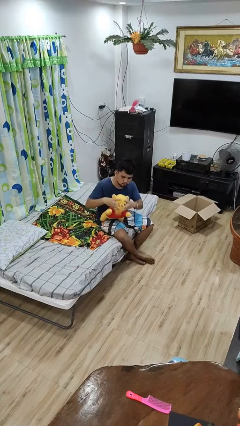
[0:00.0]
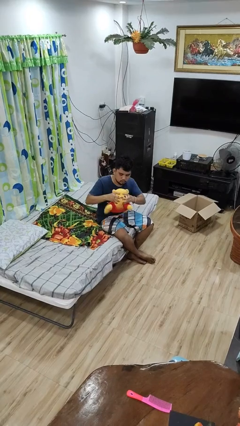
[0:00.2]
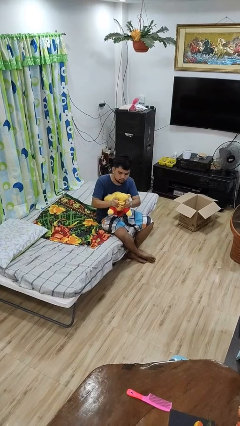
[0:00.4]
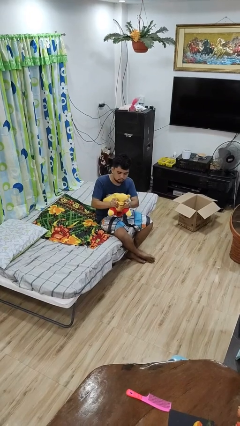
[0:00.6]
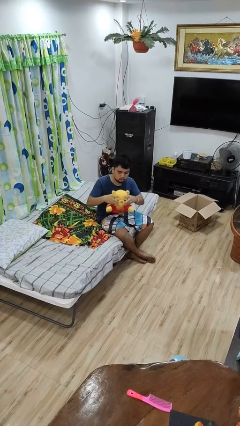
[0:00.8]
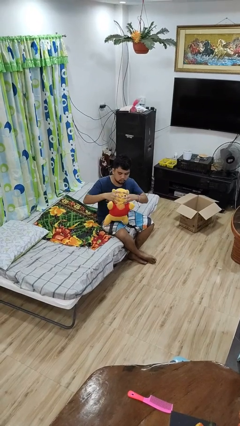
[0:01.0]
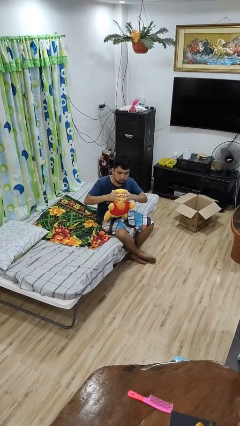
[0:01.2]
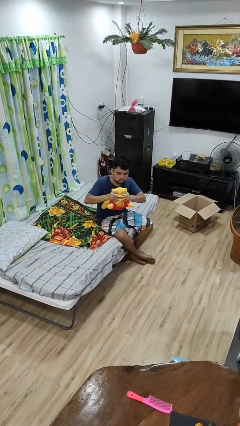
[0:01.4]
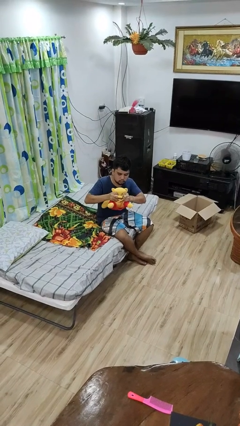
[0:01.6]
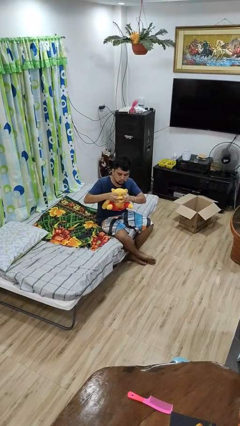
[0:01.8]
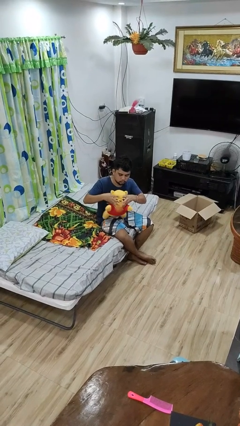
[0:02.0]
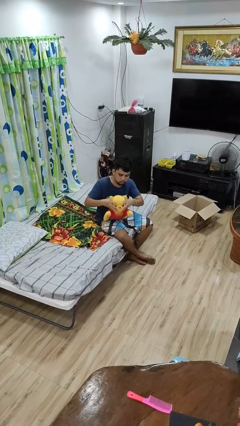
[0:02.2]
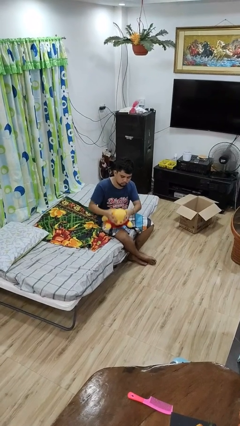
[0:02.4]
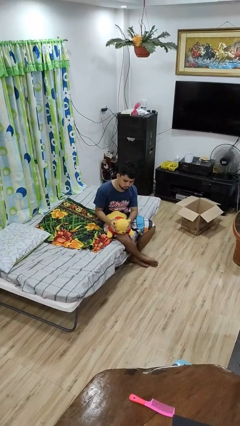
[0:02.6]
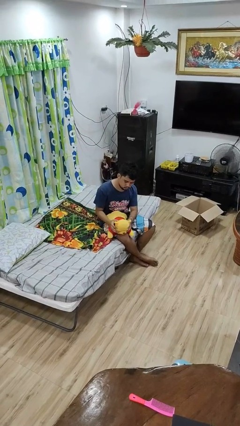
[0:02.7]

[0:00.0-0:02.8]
person squeezes object

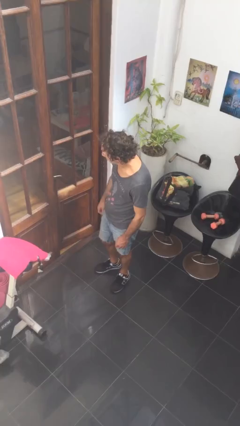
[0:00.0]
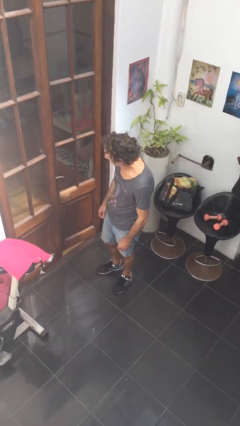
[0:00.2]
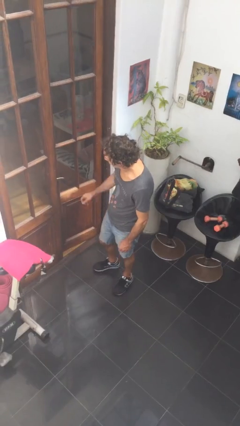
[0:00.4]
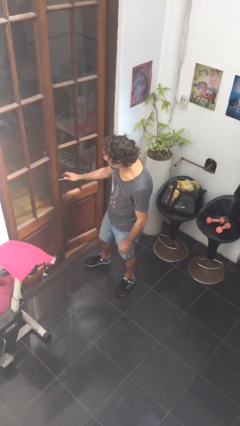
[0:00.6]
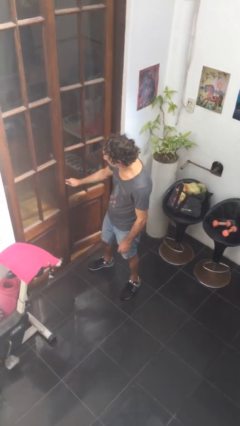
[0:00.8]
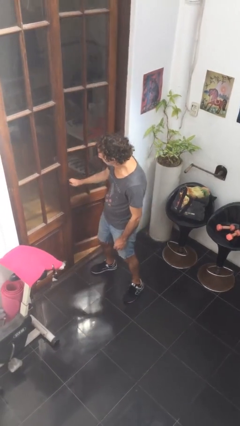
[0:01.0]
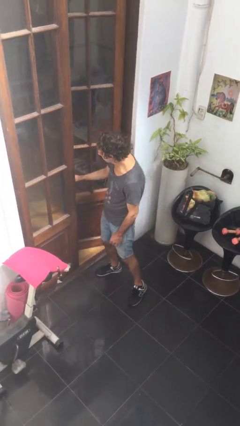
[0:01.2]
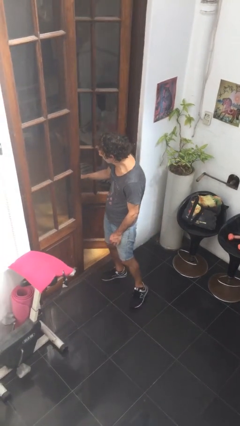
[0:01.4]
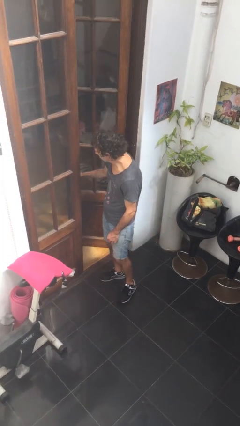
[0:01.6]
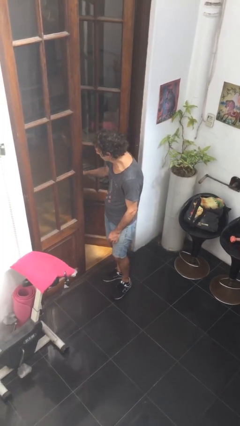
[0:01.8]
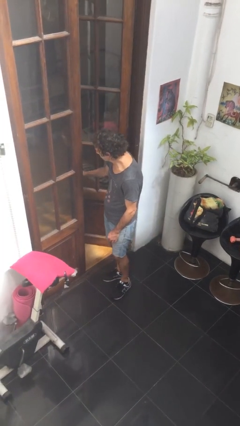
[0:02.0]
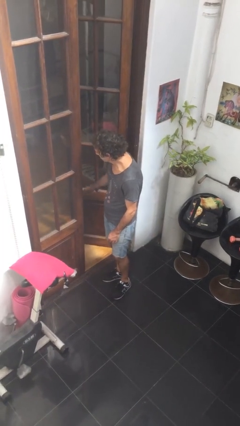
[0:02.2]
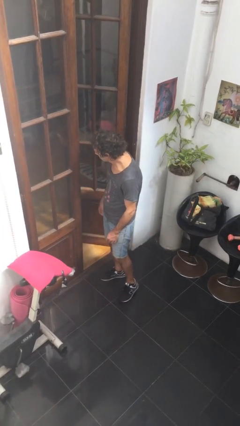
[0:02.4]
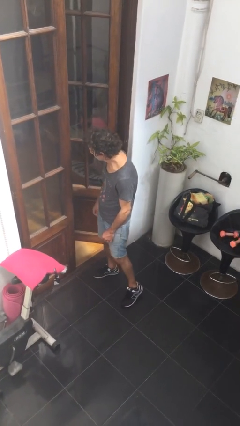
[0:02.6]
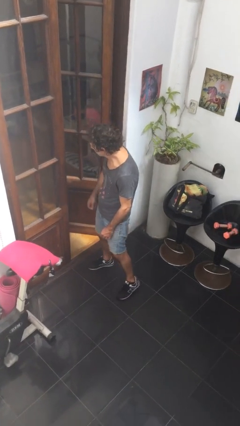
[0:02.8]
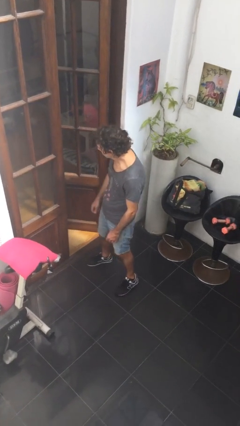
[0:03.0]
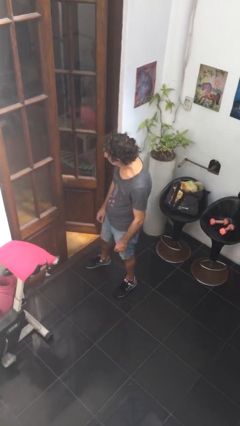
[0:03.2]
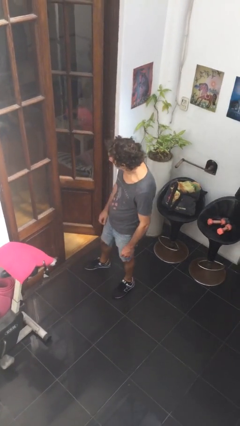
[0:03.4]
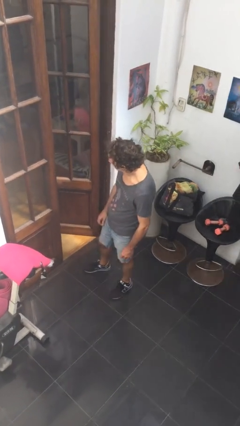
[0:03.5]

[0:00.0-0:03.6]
person opens facility door

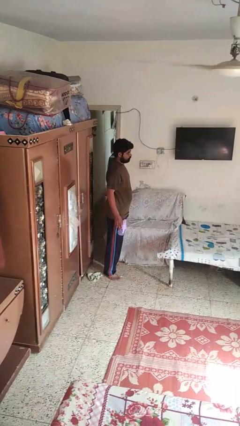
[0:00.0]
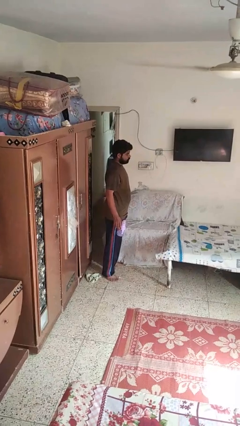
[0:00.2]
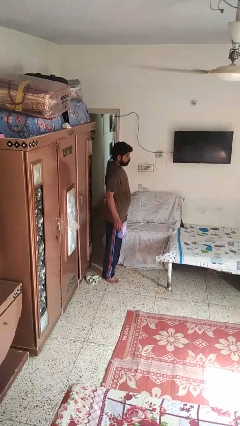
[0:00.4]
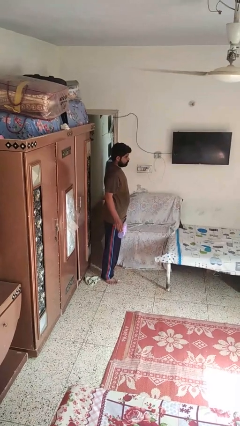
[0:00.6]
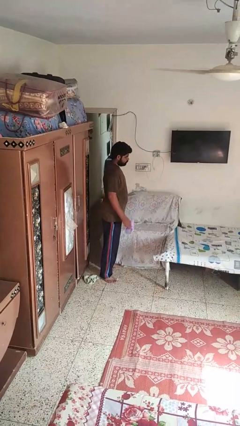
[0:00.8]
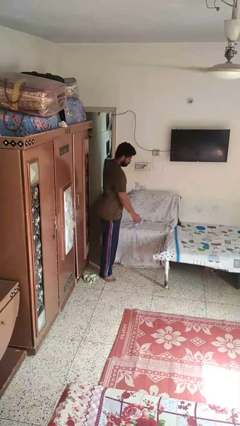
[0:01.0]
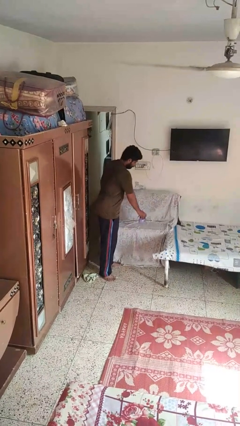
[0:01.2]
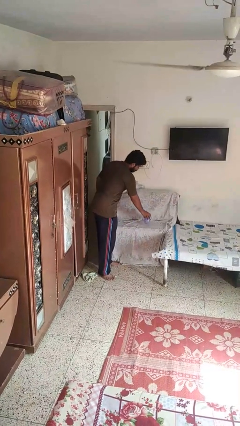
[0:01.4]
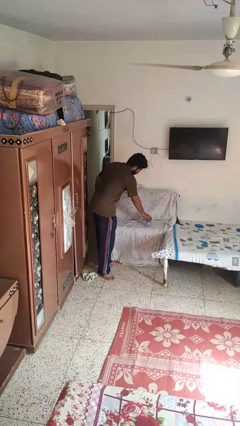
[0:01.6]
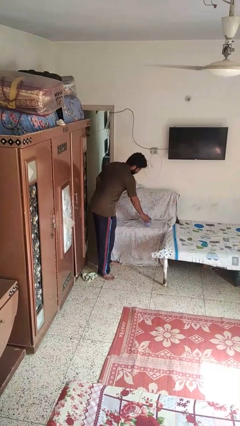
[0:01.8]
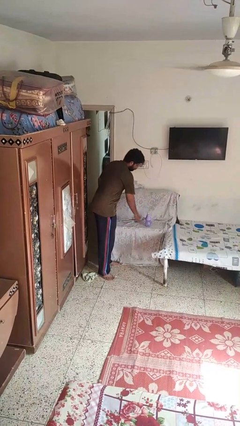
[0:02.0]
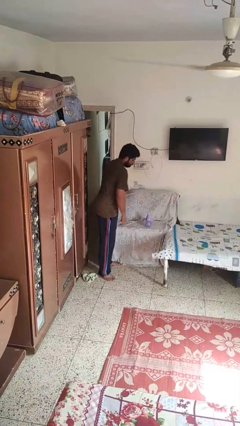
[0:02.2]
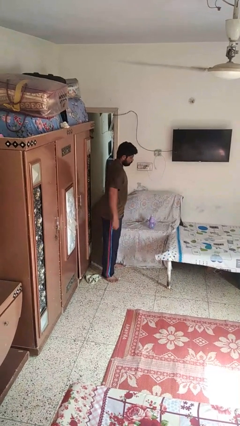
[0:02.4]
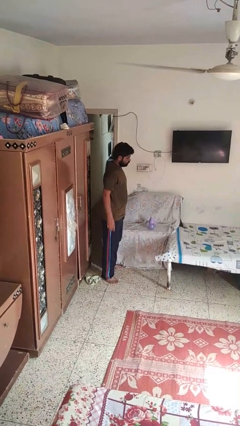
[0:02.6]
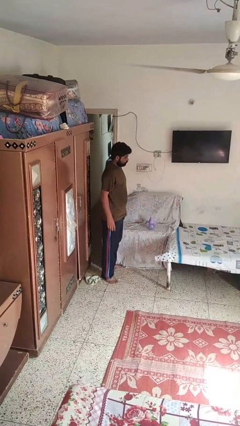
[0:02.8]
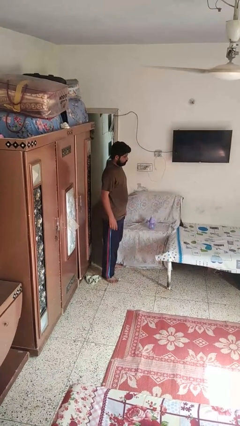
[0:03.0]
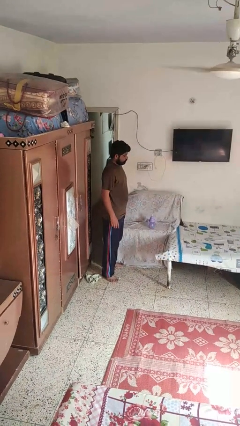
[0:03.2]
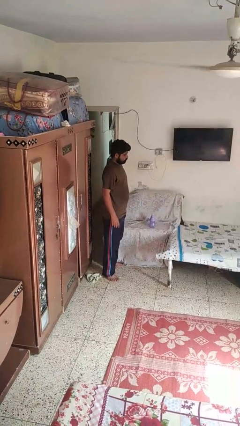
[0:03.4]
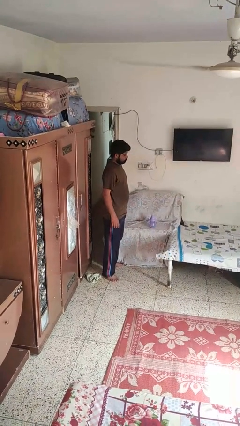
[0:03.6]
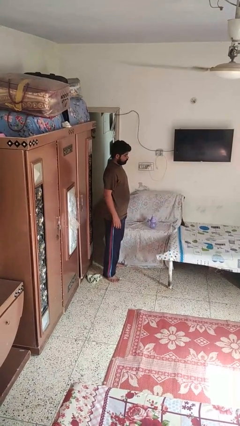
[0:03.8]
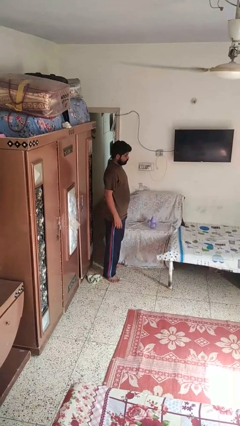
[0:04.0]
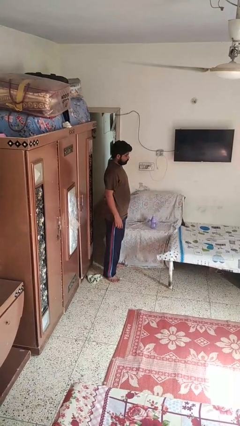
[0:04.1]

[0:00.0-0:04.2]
person puts down object on couch

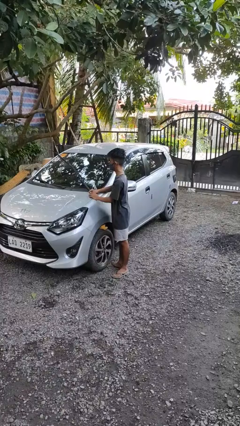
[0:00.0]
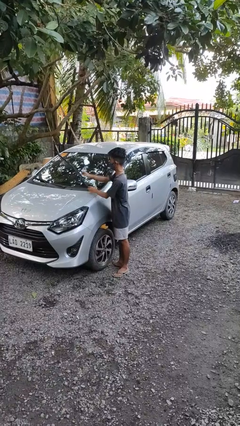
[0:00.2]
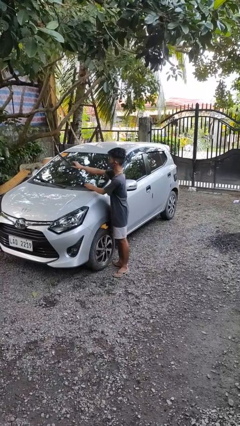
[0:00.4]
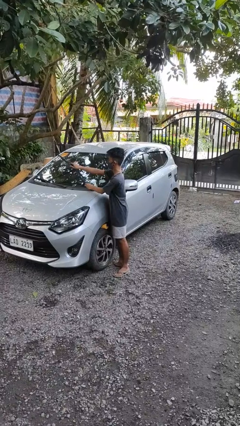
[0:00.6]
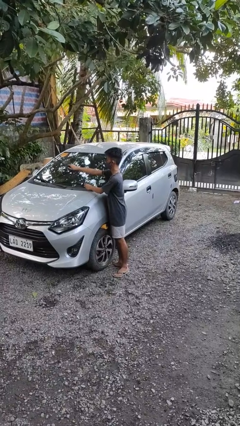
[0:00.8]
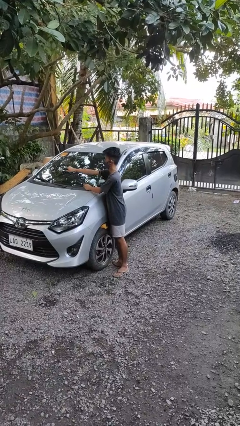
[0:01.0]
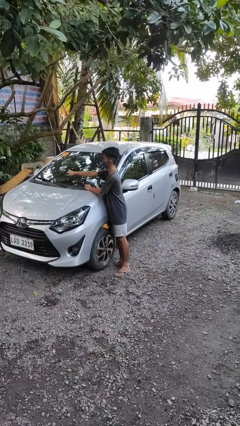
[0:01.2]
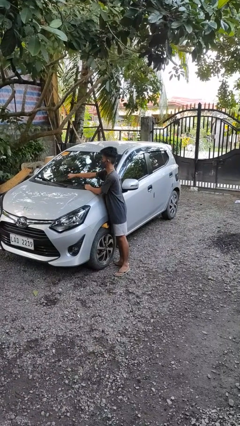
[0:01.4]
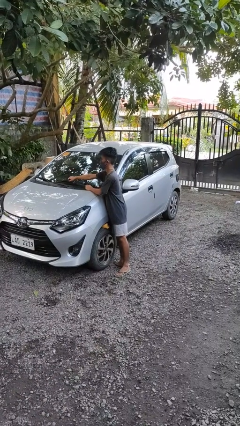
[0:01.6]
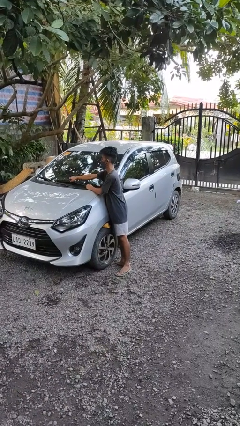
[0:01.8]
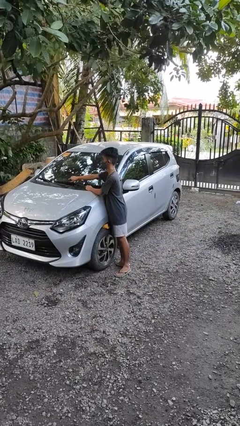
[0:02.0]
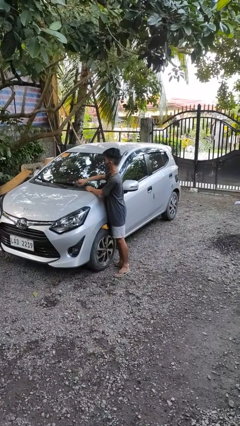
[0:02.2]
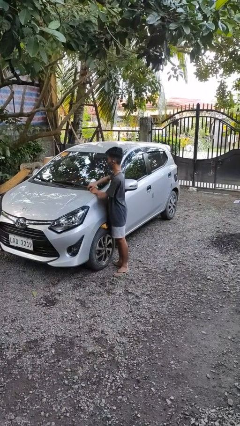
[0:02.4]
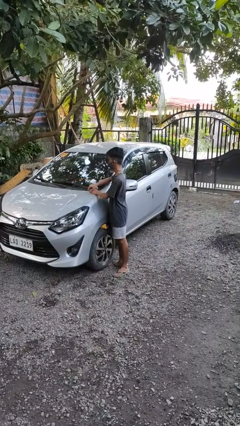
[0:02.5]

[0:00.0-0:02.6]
person flips down car wipers

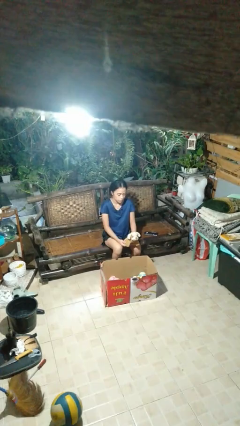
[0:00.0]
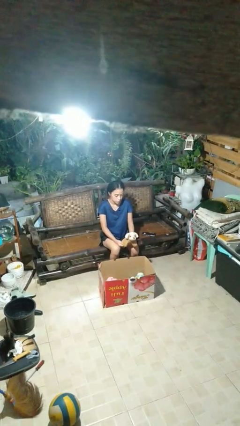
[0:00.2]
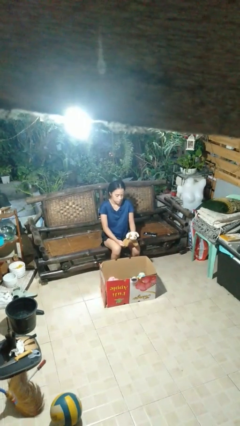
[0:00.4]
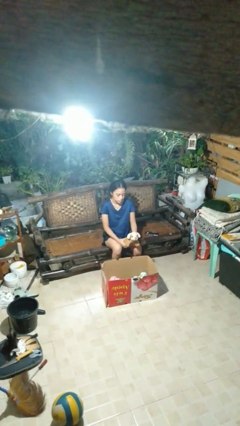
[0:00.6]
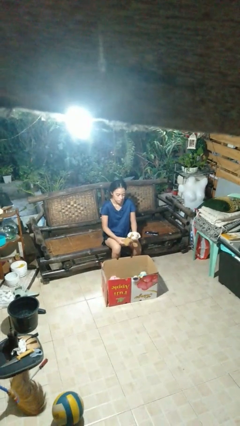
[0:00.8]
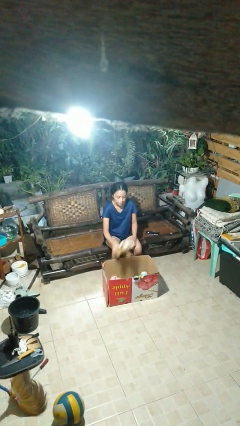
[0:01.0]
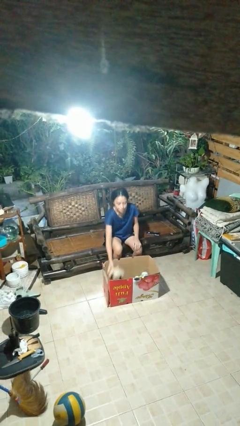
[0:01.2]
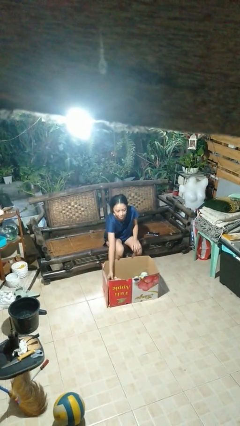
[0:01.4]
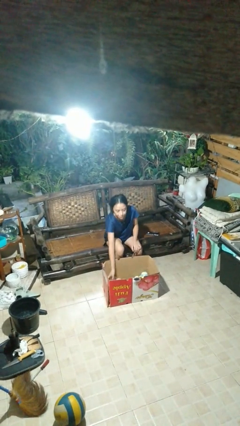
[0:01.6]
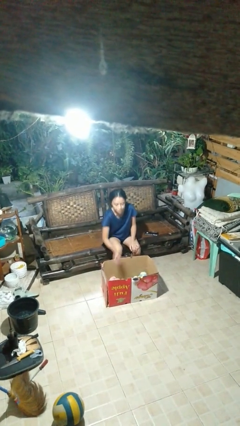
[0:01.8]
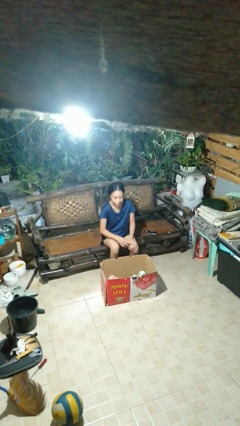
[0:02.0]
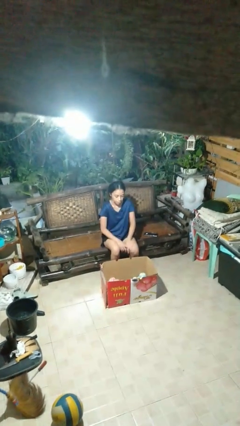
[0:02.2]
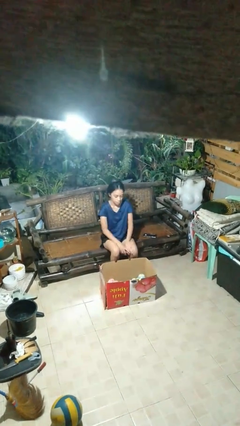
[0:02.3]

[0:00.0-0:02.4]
person puts object into box

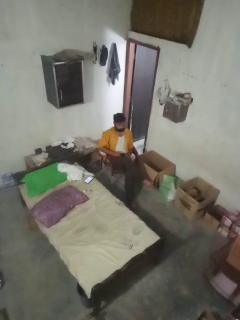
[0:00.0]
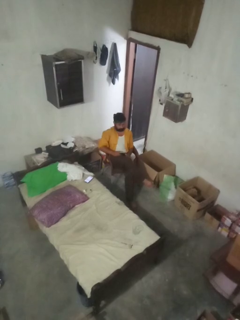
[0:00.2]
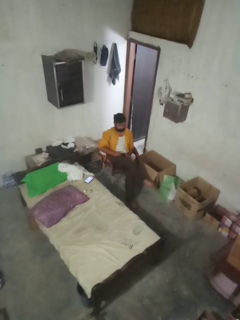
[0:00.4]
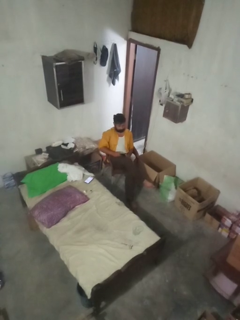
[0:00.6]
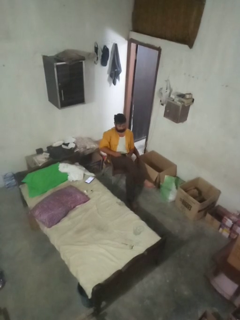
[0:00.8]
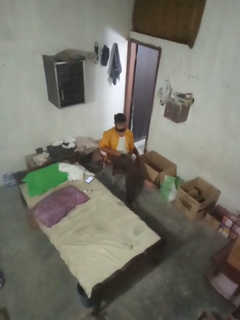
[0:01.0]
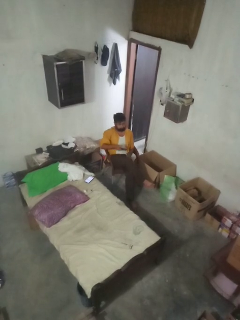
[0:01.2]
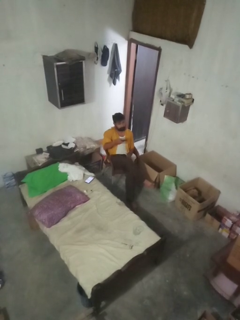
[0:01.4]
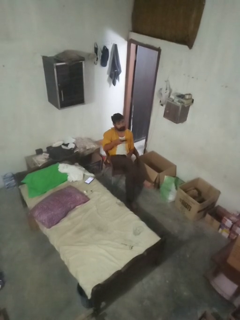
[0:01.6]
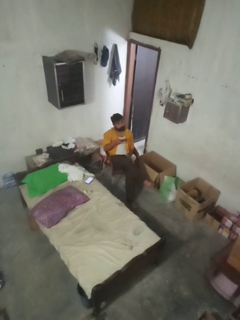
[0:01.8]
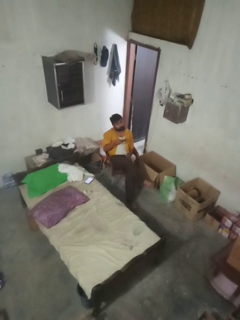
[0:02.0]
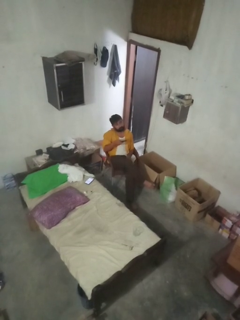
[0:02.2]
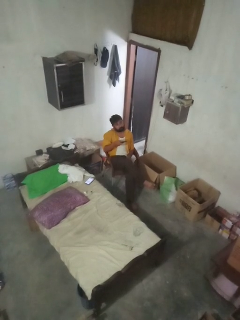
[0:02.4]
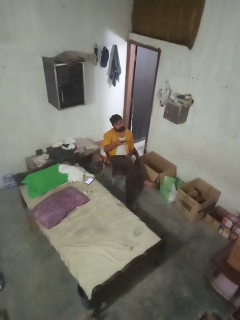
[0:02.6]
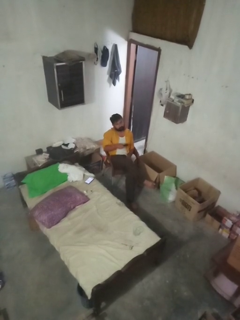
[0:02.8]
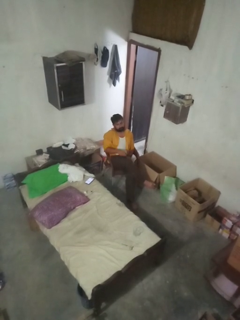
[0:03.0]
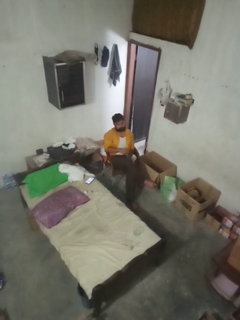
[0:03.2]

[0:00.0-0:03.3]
person uses television remote
